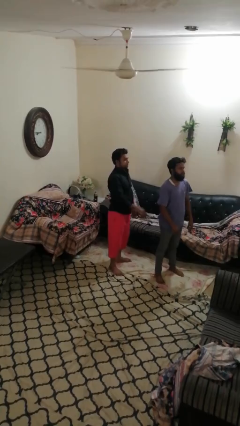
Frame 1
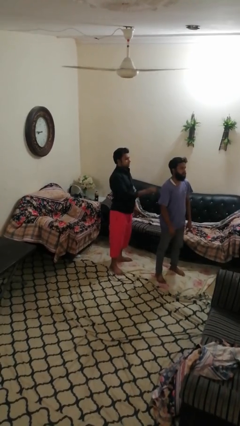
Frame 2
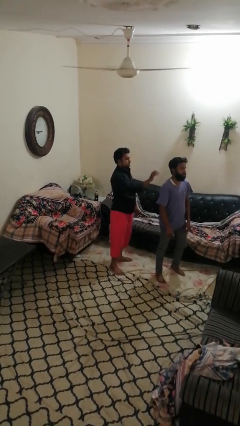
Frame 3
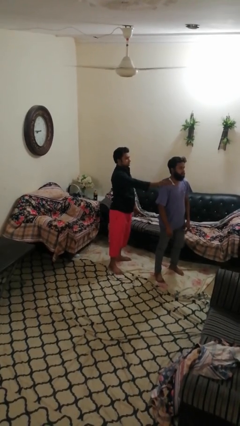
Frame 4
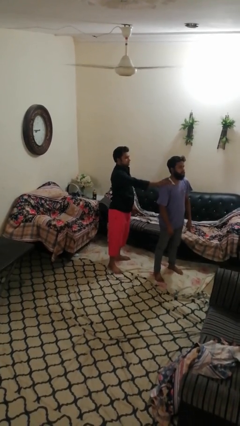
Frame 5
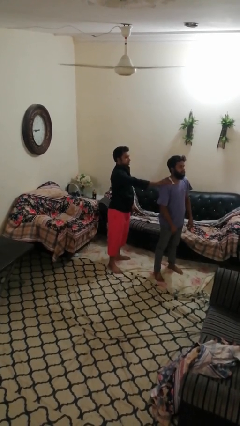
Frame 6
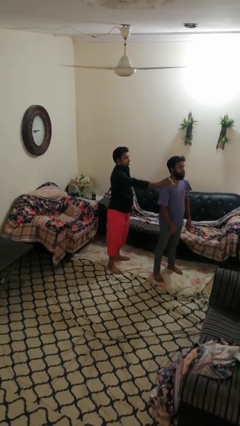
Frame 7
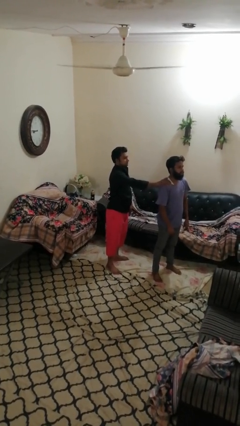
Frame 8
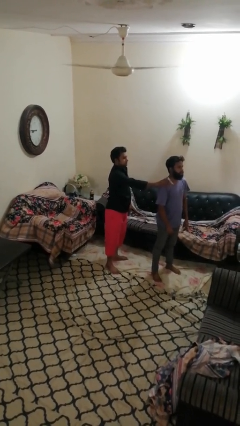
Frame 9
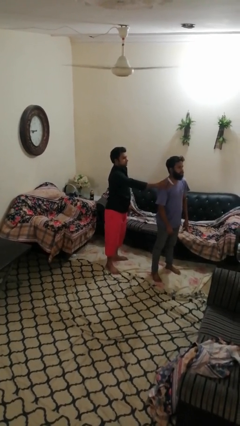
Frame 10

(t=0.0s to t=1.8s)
person grabs person by shoulder

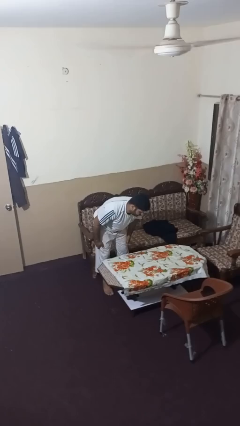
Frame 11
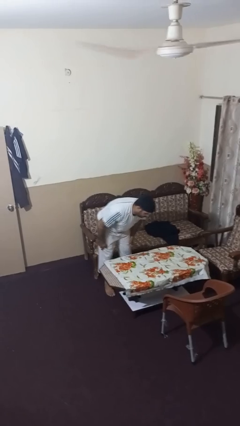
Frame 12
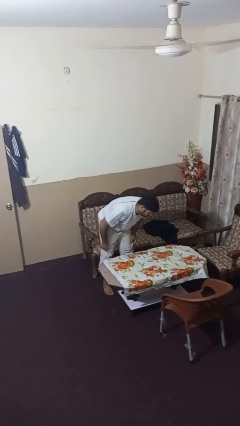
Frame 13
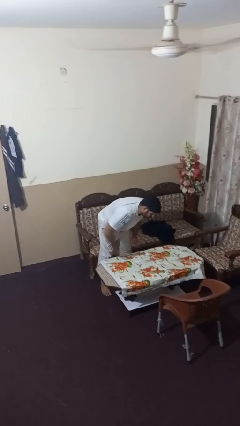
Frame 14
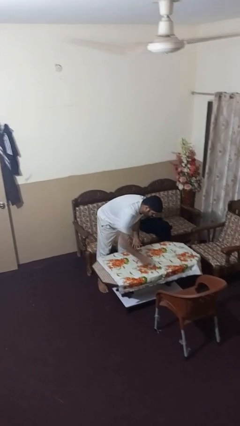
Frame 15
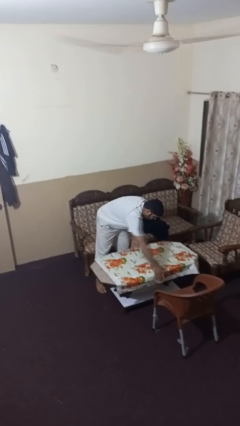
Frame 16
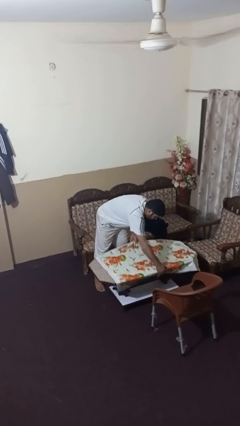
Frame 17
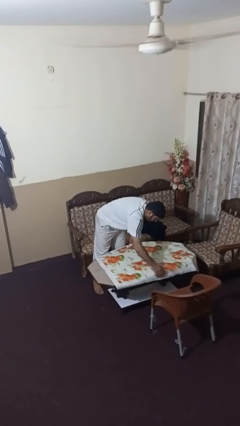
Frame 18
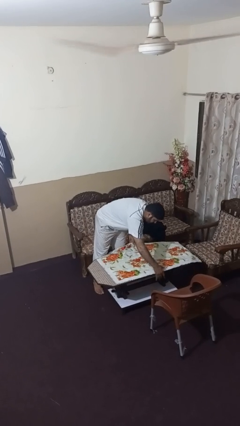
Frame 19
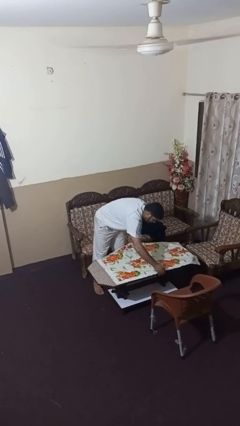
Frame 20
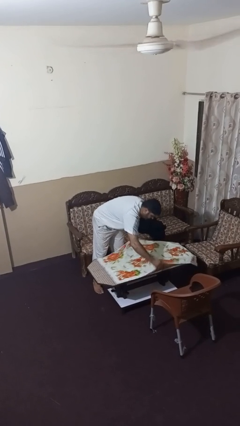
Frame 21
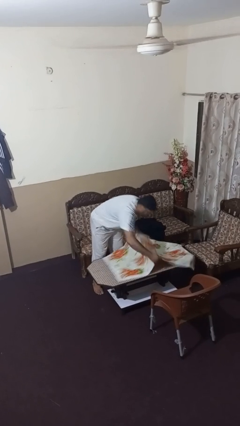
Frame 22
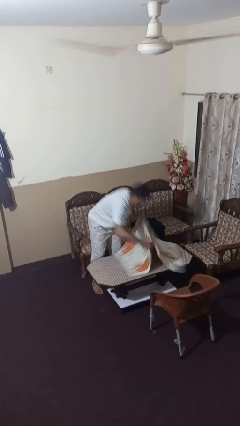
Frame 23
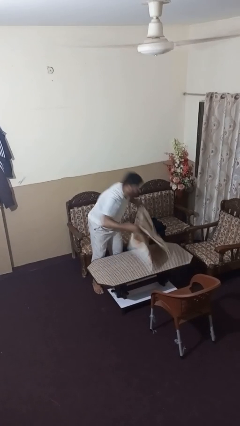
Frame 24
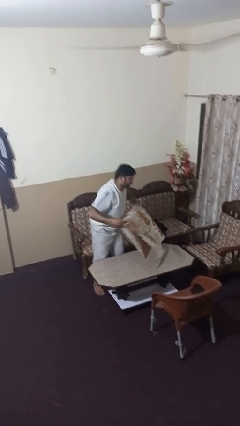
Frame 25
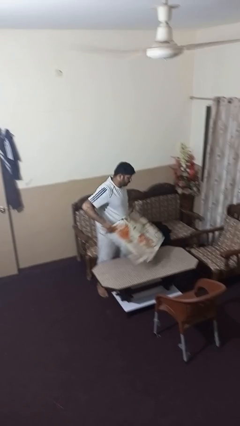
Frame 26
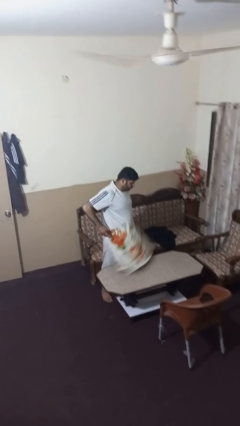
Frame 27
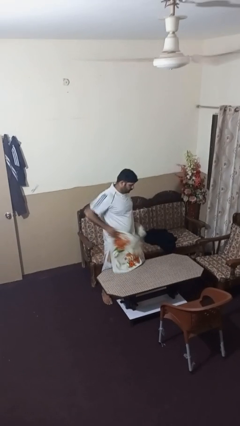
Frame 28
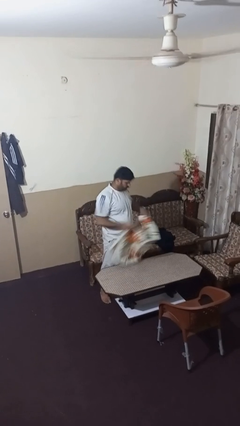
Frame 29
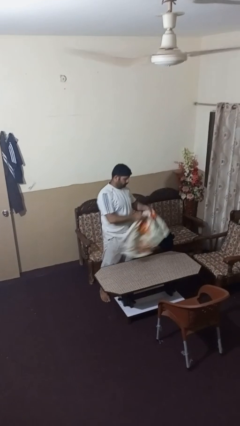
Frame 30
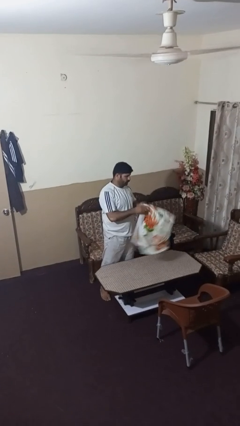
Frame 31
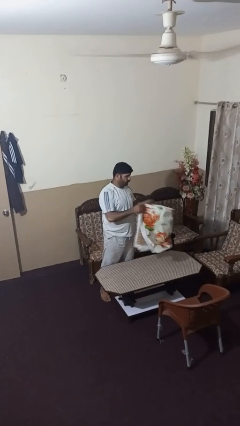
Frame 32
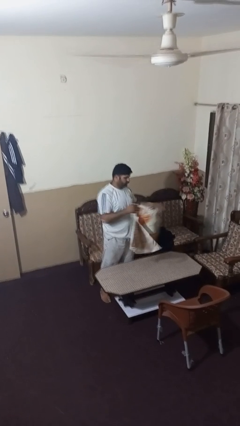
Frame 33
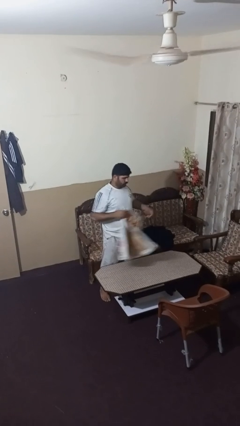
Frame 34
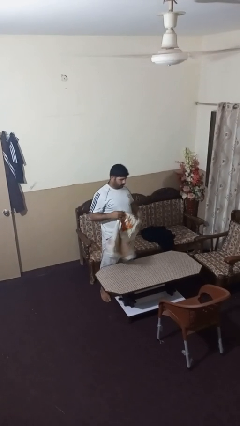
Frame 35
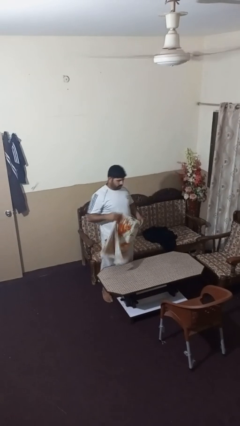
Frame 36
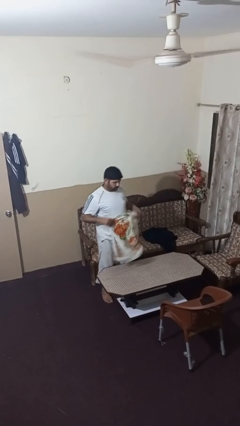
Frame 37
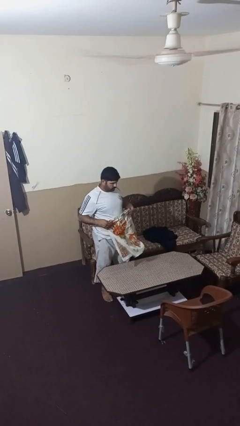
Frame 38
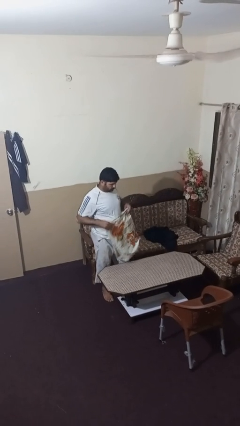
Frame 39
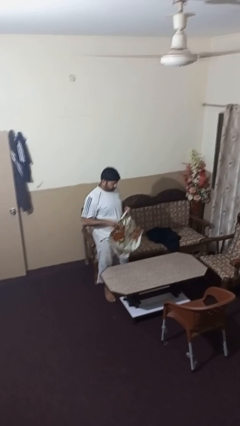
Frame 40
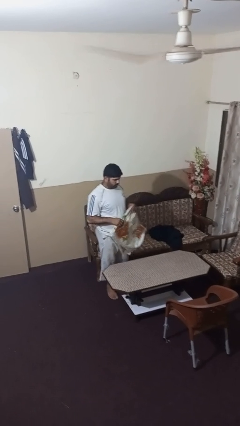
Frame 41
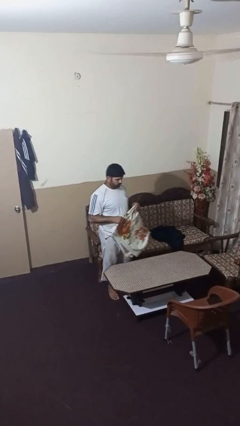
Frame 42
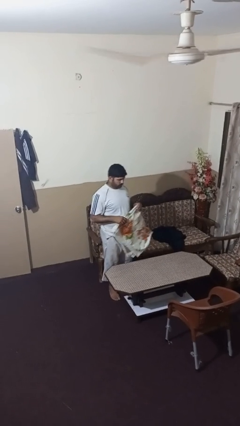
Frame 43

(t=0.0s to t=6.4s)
person folds tablecloth

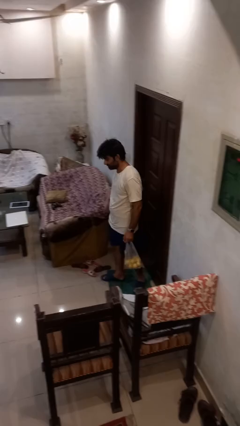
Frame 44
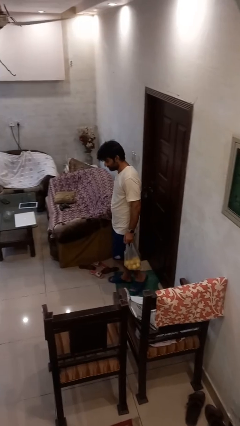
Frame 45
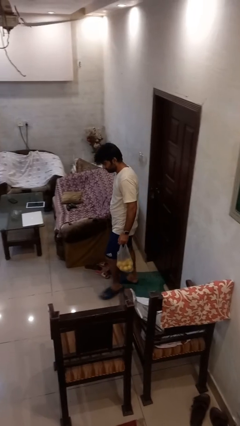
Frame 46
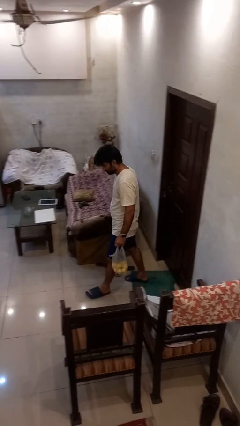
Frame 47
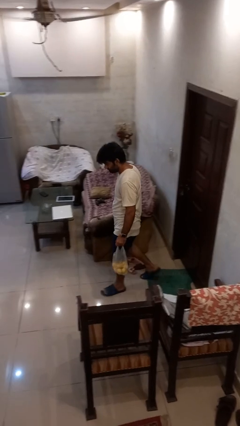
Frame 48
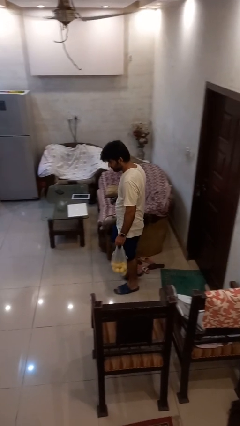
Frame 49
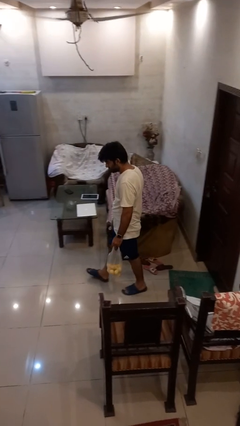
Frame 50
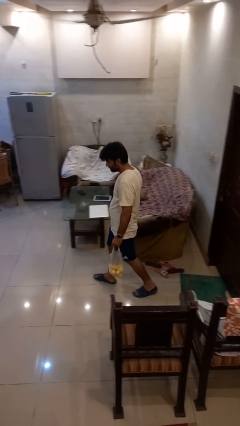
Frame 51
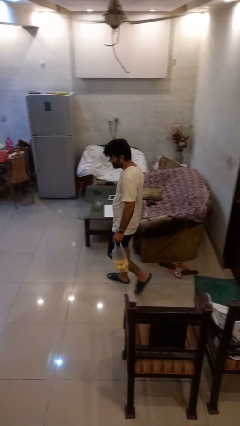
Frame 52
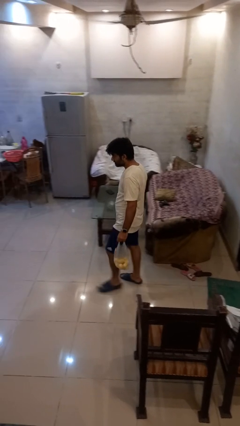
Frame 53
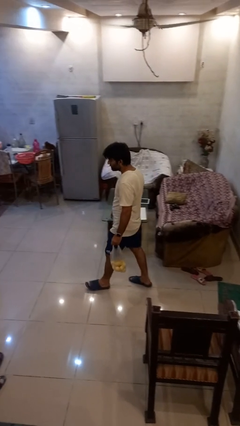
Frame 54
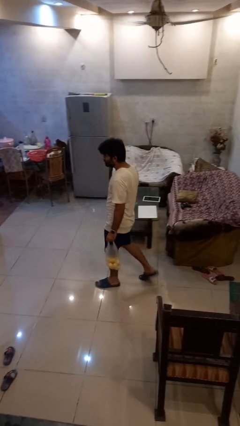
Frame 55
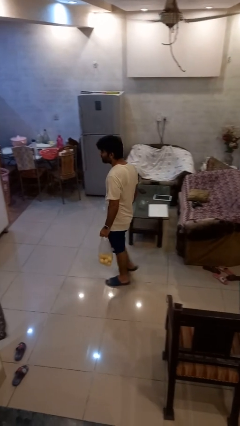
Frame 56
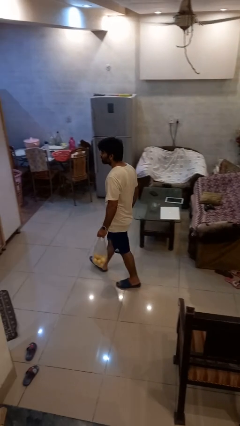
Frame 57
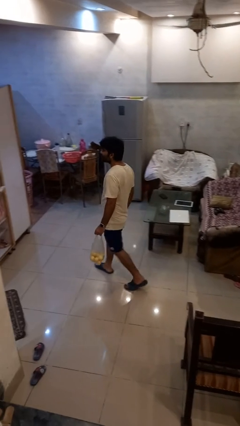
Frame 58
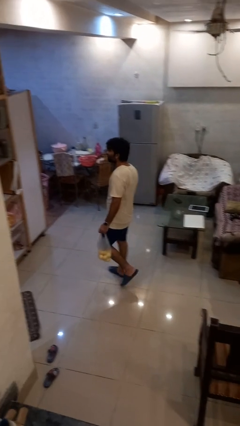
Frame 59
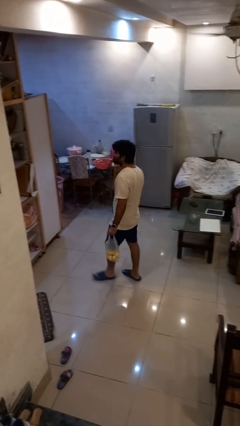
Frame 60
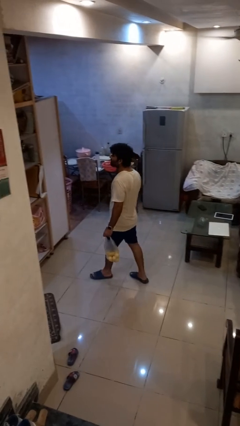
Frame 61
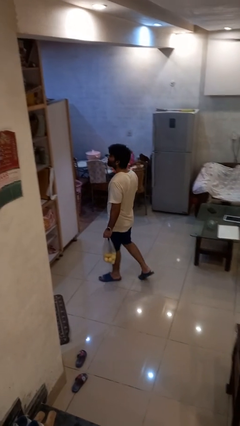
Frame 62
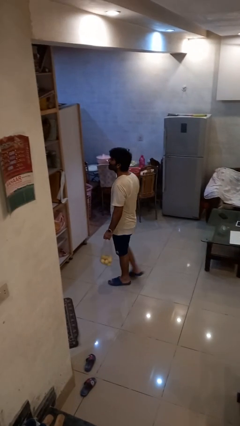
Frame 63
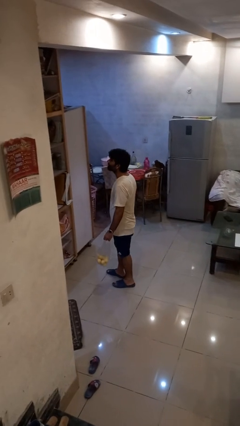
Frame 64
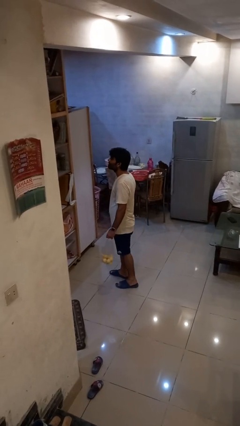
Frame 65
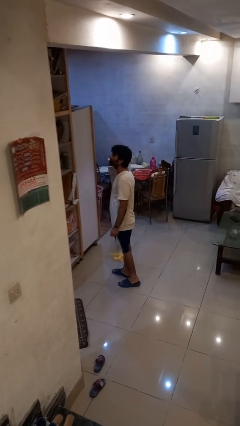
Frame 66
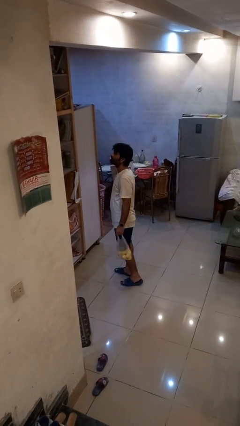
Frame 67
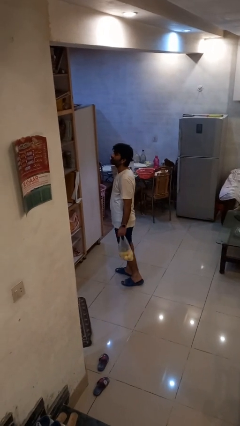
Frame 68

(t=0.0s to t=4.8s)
person carries groceries

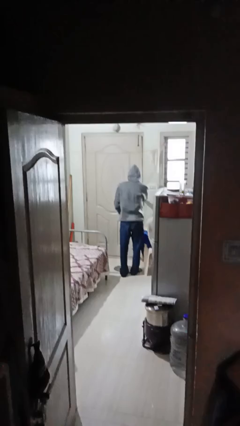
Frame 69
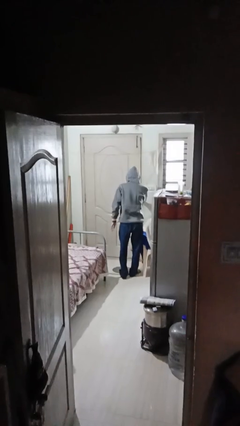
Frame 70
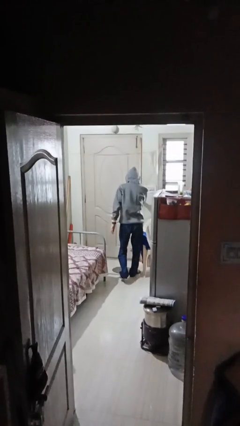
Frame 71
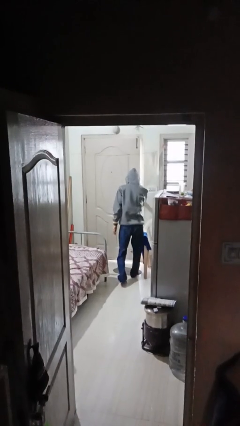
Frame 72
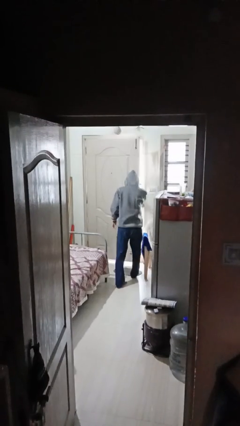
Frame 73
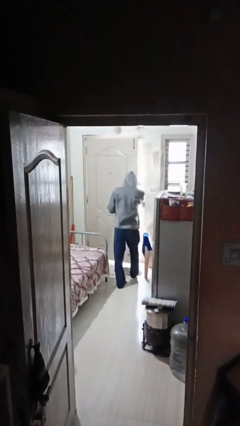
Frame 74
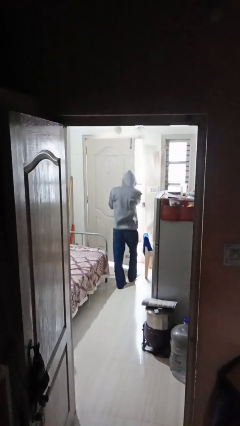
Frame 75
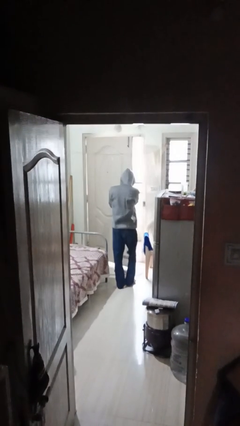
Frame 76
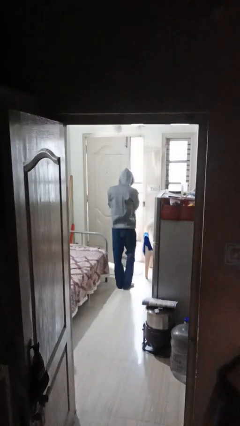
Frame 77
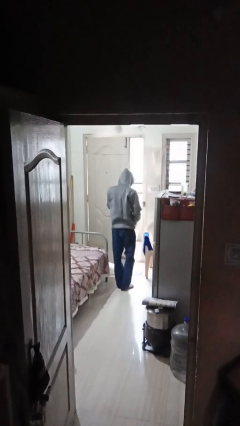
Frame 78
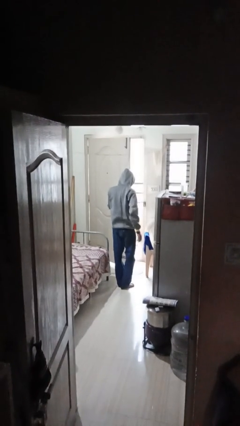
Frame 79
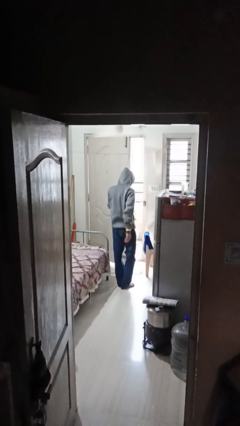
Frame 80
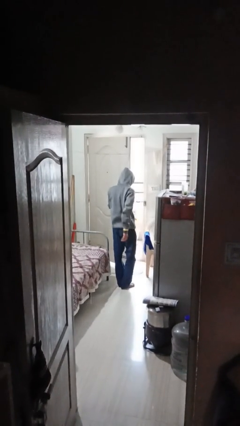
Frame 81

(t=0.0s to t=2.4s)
person opens facility door

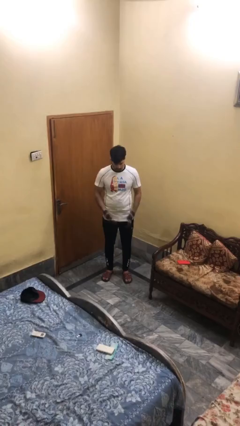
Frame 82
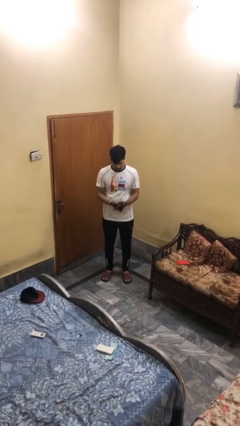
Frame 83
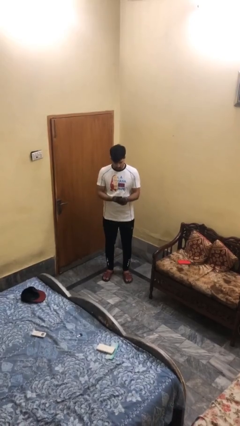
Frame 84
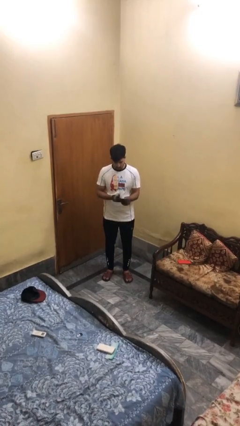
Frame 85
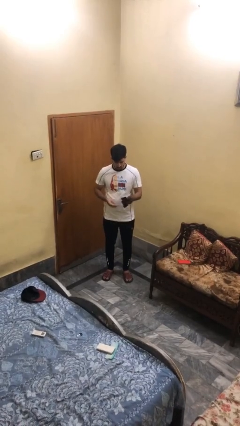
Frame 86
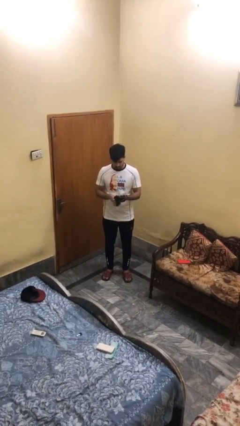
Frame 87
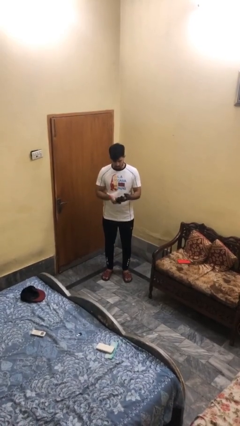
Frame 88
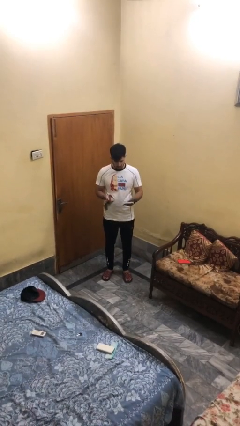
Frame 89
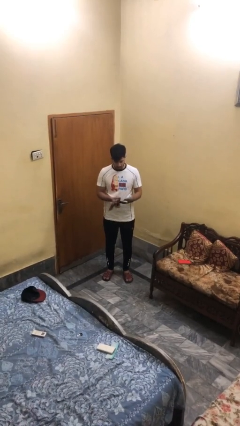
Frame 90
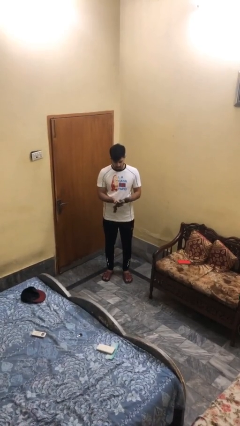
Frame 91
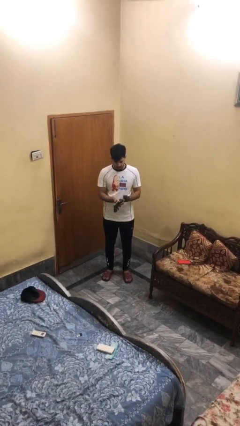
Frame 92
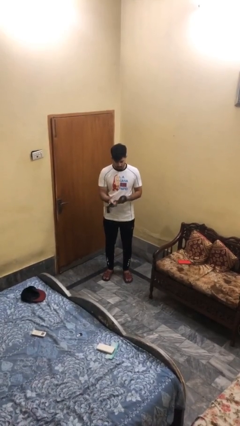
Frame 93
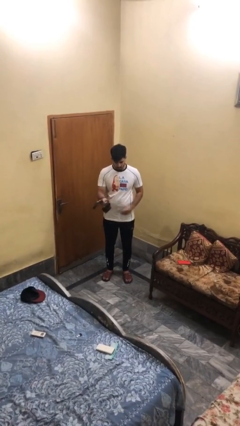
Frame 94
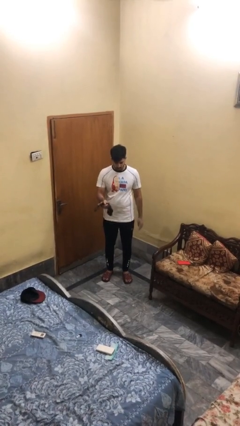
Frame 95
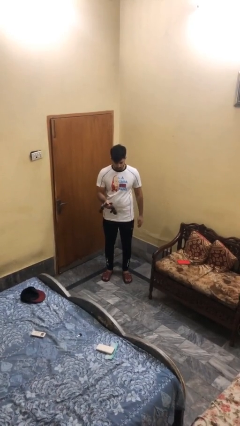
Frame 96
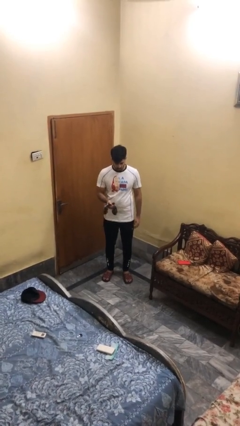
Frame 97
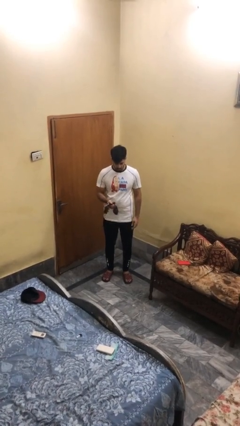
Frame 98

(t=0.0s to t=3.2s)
person takes off gloves
